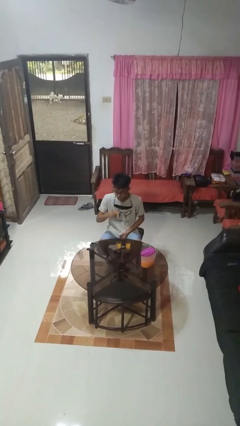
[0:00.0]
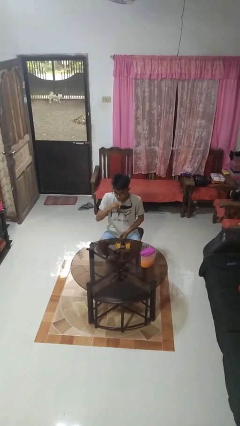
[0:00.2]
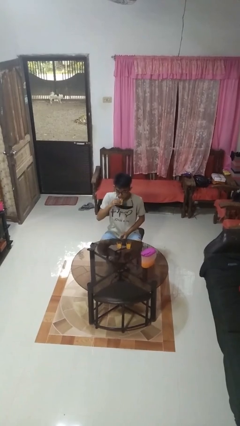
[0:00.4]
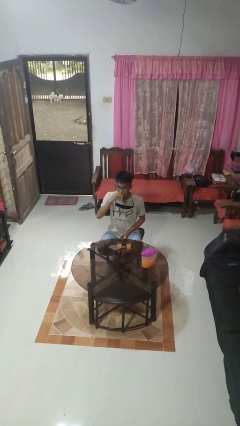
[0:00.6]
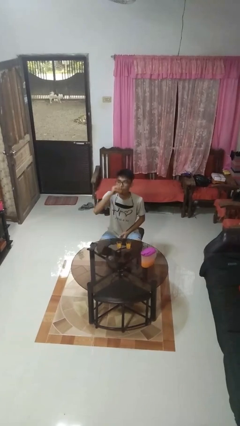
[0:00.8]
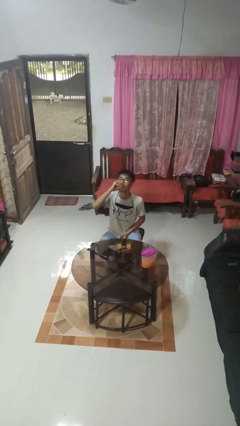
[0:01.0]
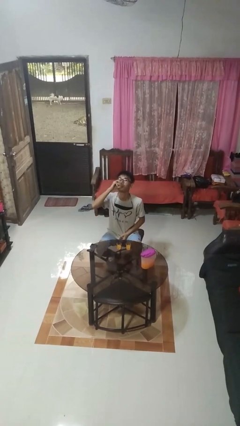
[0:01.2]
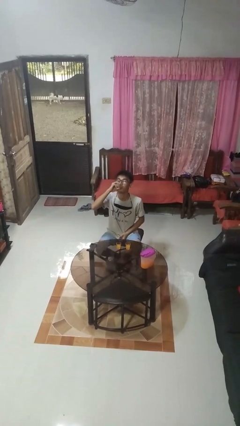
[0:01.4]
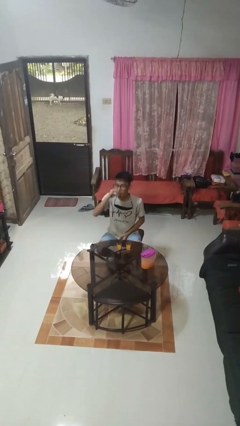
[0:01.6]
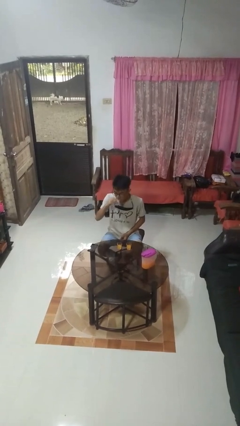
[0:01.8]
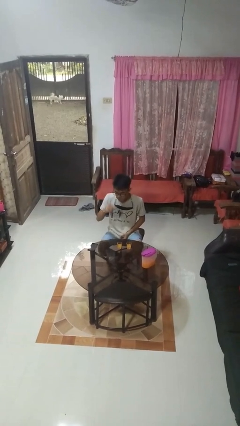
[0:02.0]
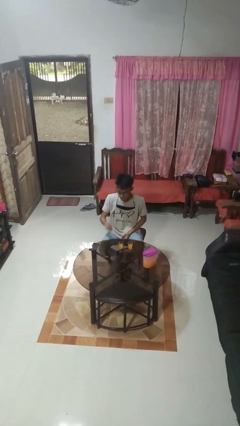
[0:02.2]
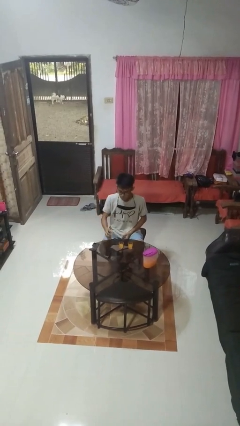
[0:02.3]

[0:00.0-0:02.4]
person drinks from shotglass

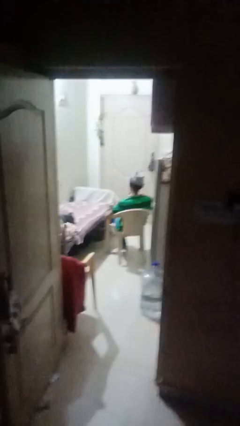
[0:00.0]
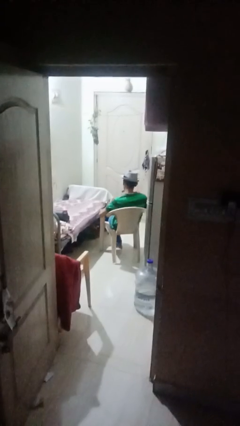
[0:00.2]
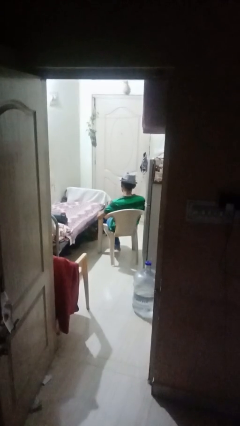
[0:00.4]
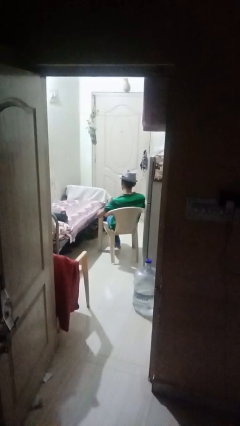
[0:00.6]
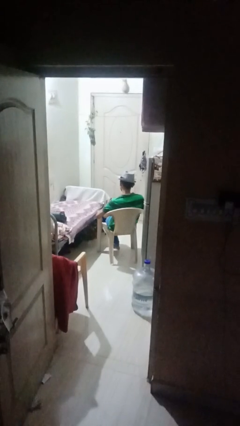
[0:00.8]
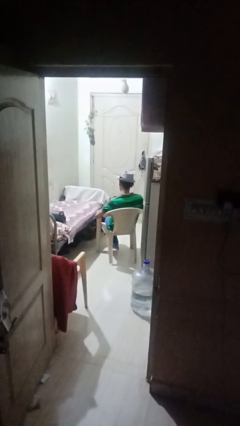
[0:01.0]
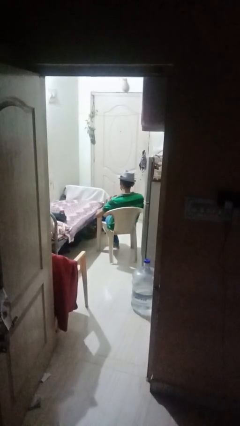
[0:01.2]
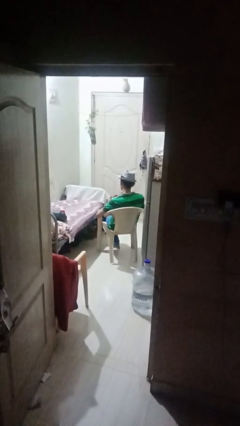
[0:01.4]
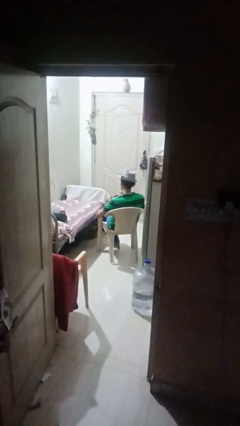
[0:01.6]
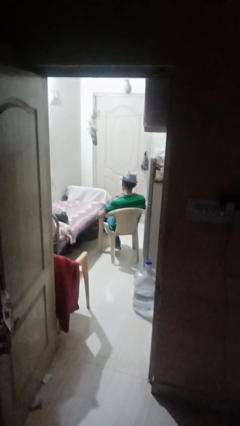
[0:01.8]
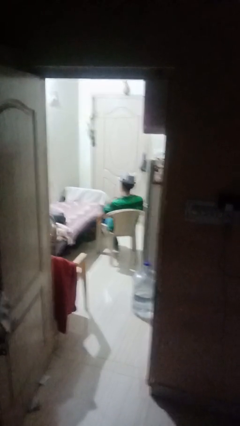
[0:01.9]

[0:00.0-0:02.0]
person stirs mug

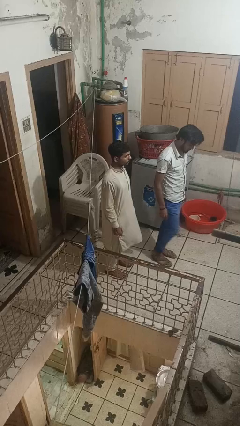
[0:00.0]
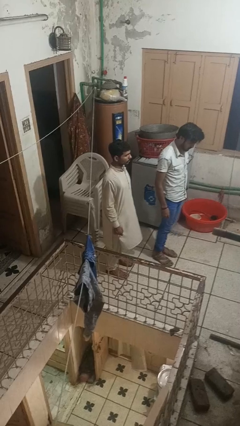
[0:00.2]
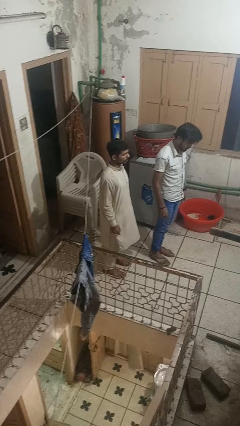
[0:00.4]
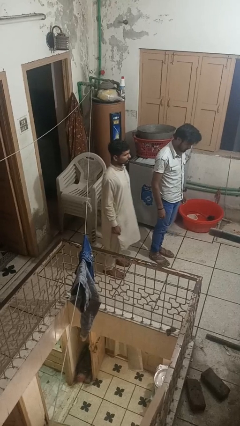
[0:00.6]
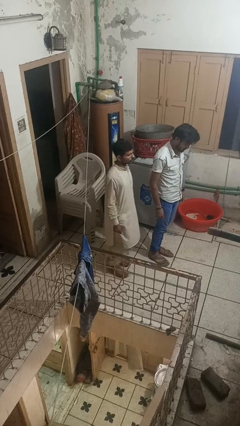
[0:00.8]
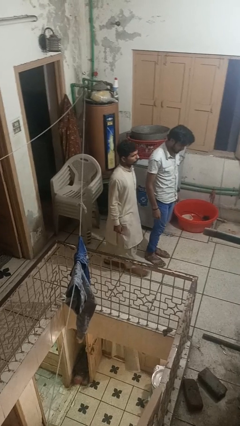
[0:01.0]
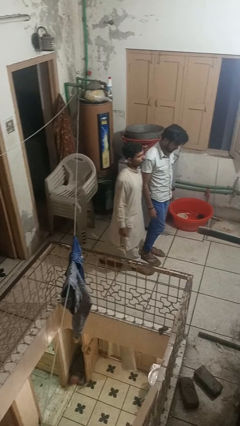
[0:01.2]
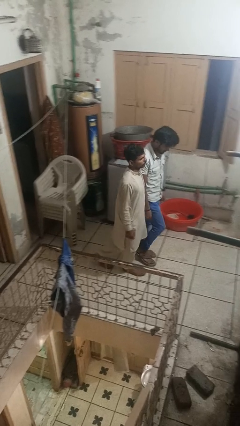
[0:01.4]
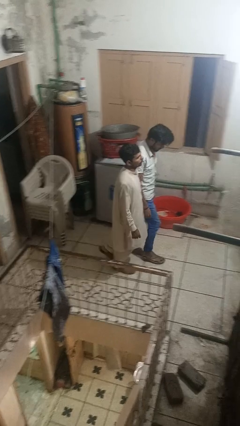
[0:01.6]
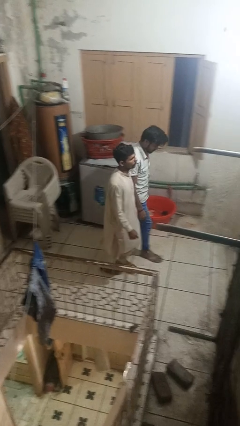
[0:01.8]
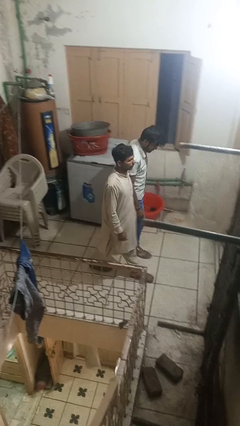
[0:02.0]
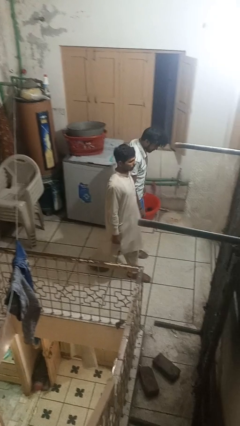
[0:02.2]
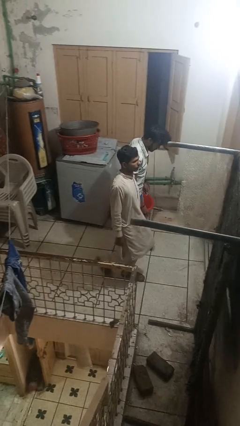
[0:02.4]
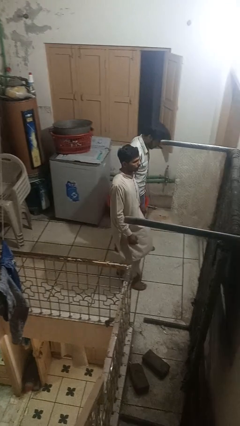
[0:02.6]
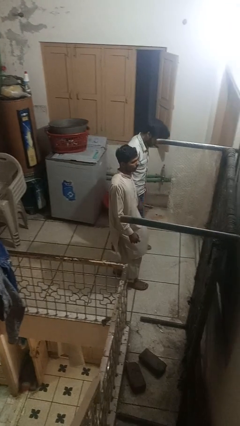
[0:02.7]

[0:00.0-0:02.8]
person bumps into person

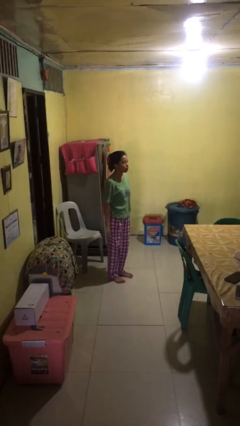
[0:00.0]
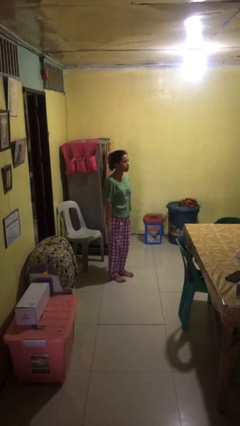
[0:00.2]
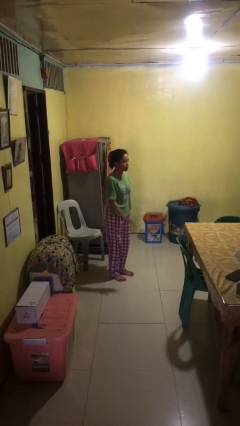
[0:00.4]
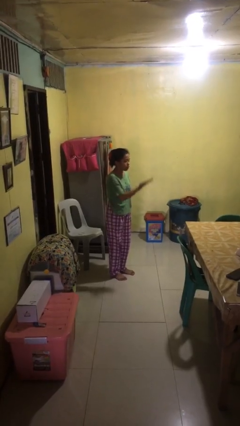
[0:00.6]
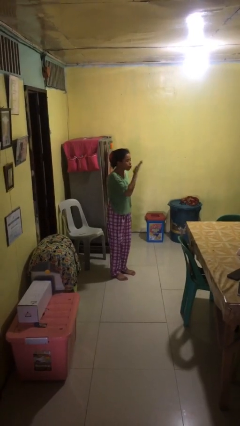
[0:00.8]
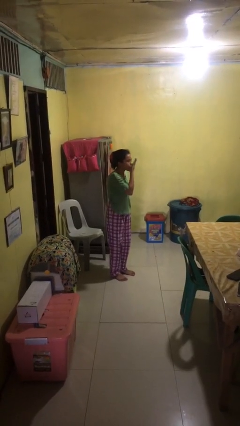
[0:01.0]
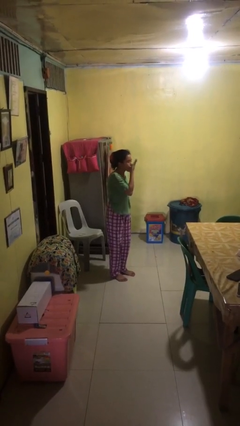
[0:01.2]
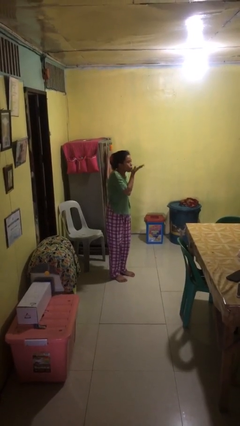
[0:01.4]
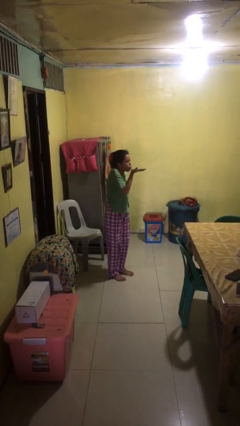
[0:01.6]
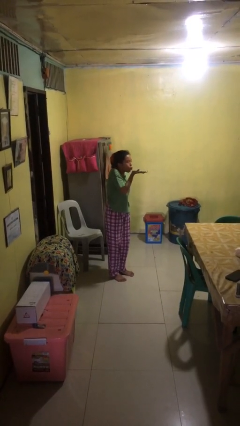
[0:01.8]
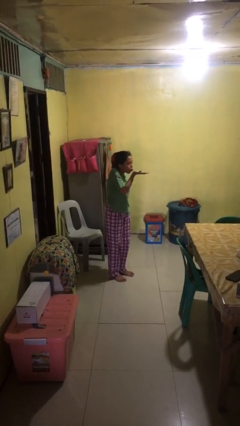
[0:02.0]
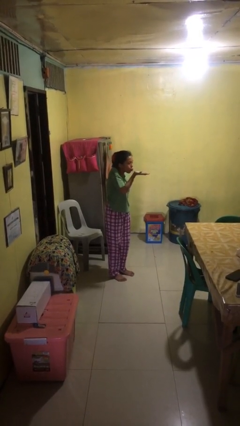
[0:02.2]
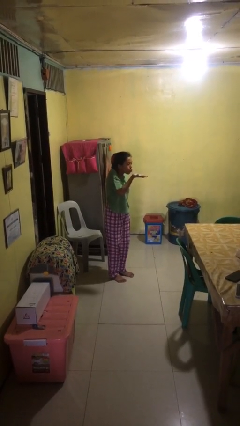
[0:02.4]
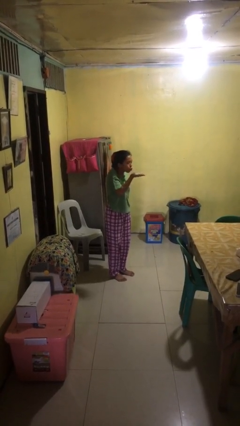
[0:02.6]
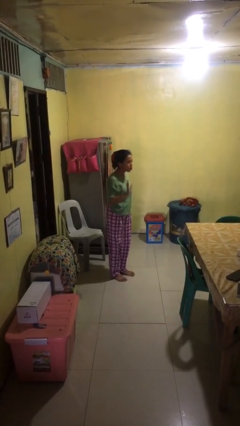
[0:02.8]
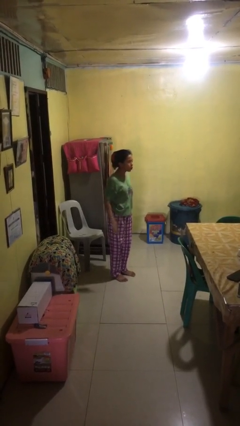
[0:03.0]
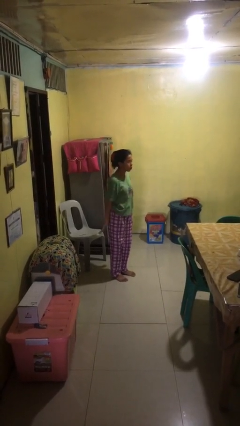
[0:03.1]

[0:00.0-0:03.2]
person gestures blow kiss

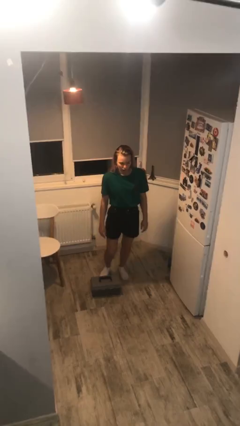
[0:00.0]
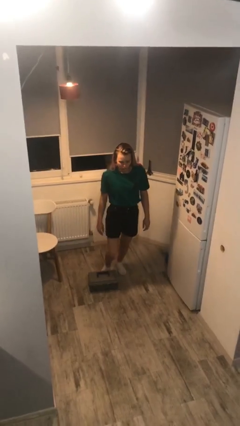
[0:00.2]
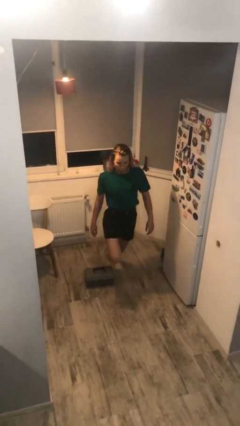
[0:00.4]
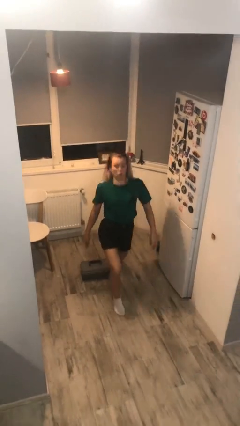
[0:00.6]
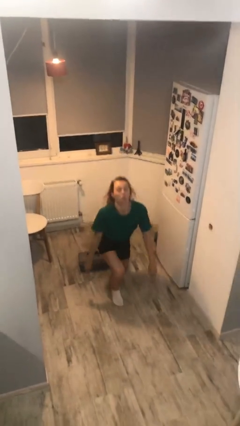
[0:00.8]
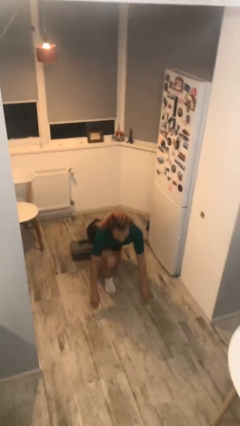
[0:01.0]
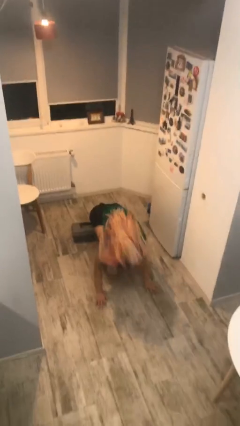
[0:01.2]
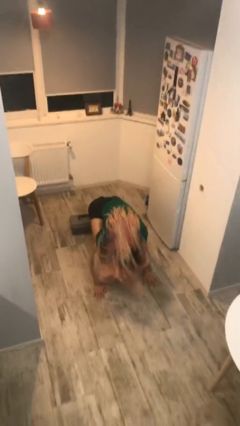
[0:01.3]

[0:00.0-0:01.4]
person trips on object on floor

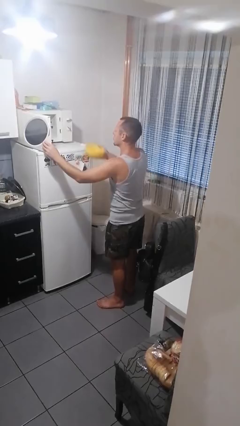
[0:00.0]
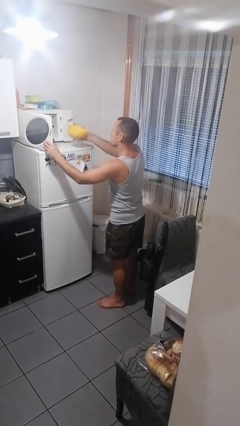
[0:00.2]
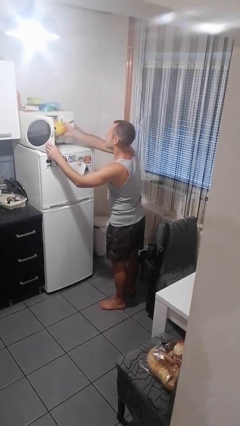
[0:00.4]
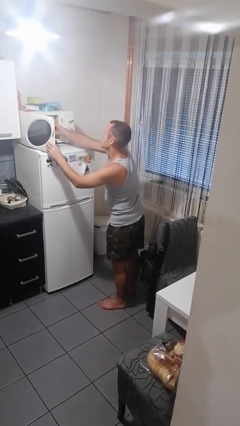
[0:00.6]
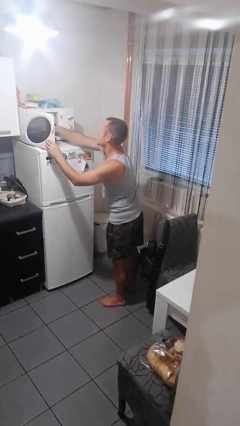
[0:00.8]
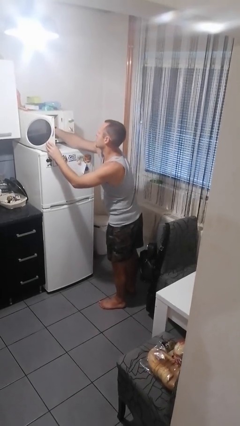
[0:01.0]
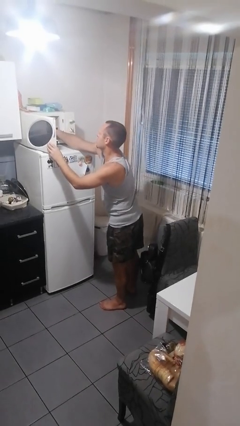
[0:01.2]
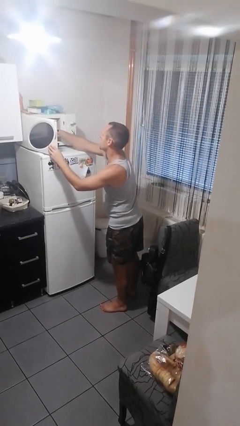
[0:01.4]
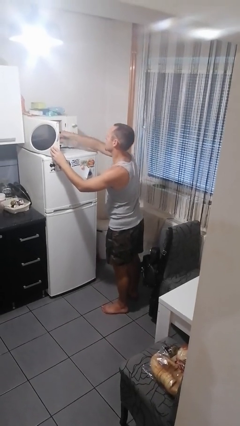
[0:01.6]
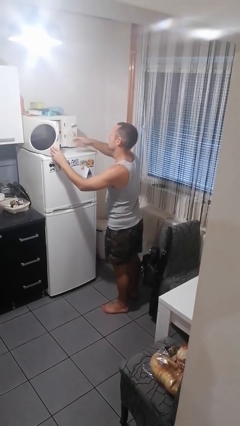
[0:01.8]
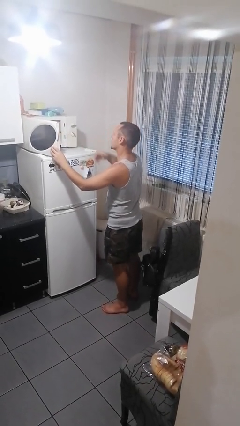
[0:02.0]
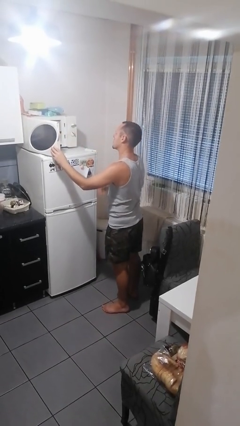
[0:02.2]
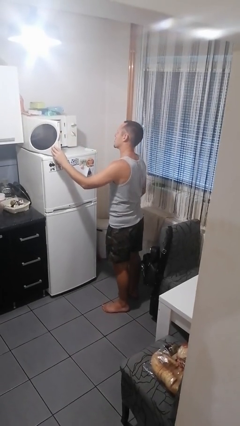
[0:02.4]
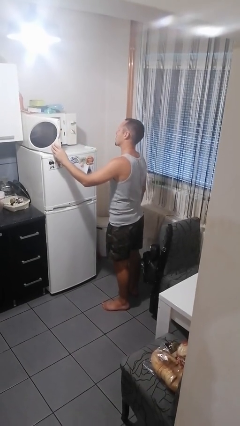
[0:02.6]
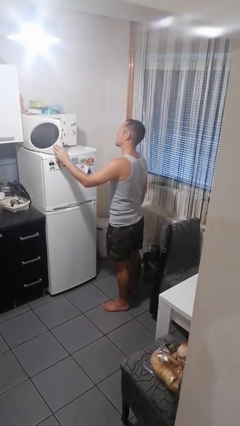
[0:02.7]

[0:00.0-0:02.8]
person puts object into microwave

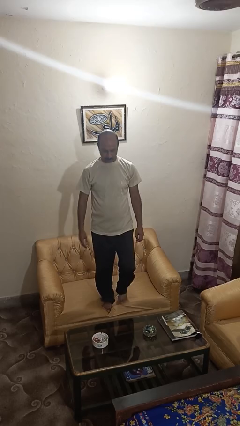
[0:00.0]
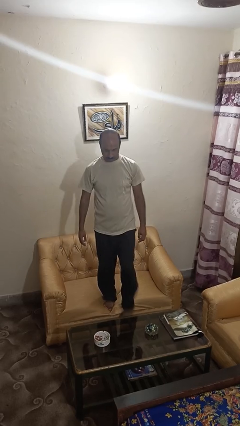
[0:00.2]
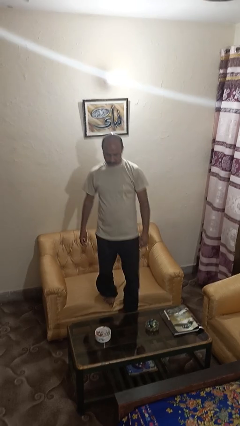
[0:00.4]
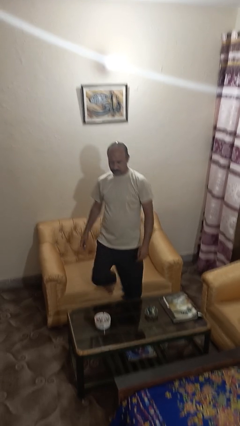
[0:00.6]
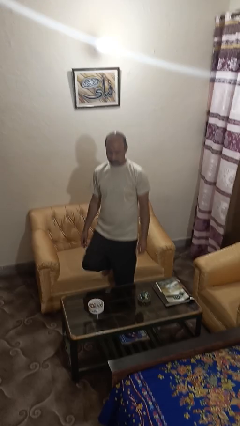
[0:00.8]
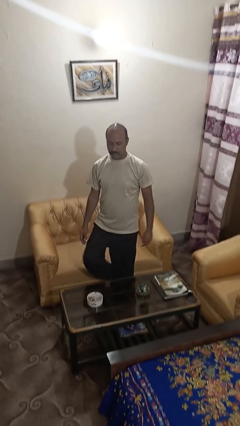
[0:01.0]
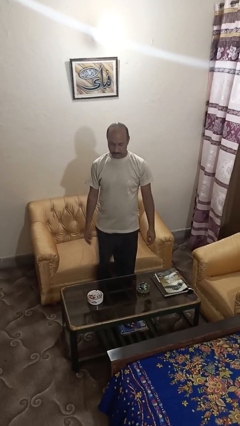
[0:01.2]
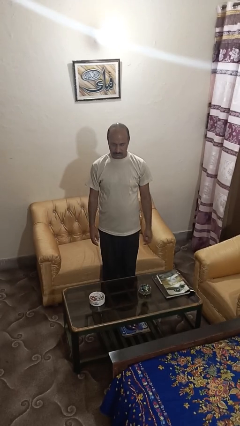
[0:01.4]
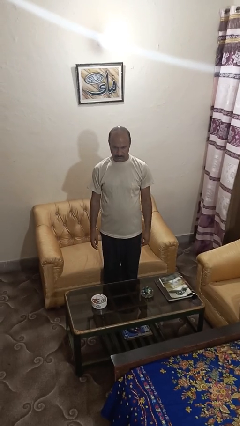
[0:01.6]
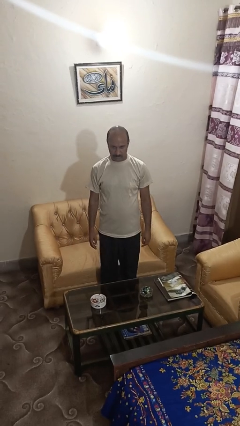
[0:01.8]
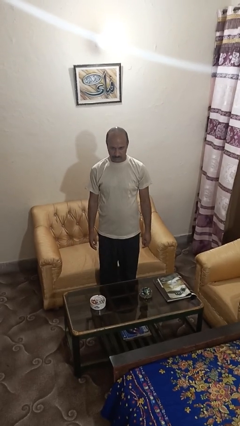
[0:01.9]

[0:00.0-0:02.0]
person climbs off couch
